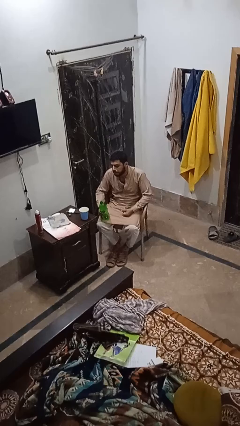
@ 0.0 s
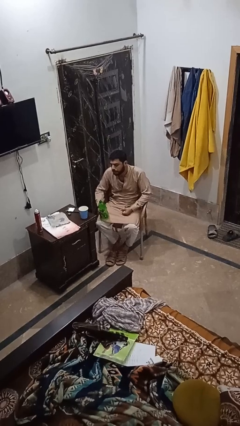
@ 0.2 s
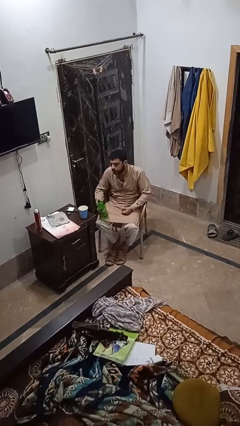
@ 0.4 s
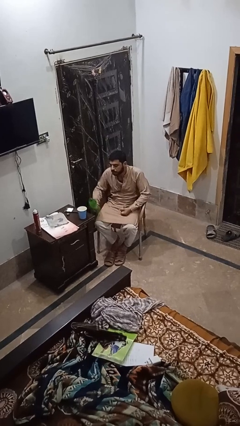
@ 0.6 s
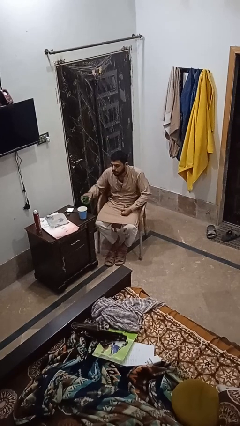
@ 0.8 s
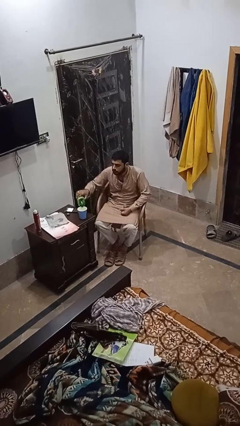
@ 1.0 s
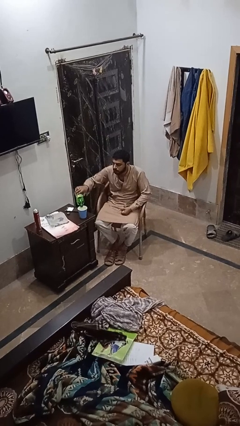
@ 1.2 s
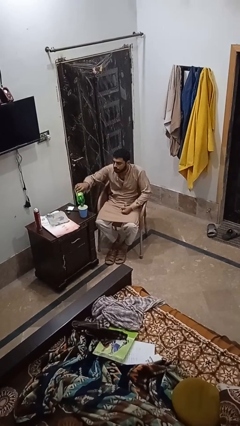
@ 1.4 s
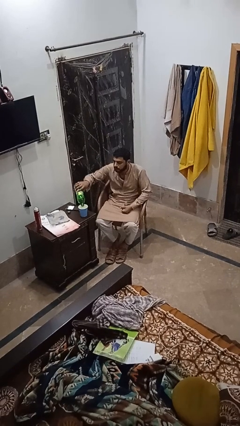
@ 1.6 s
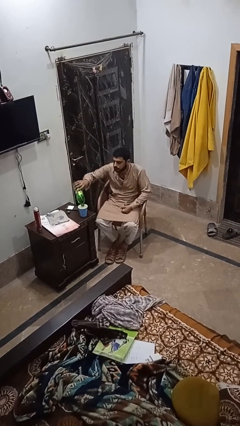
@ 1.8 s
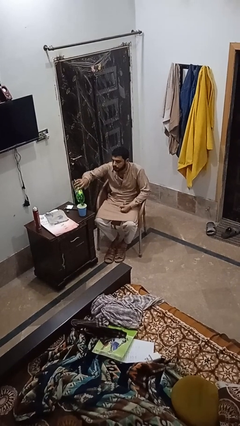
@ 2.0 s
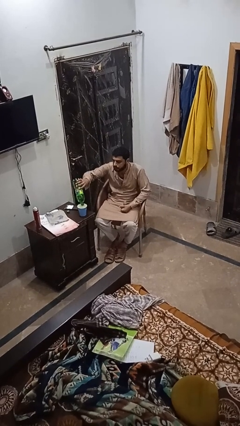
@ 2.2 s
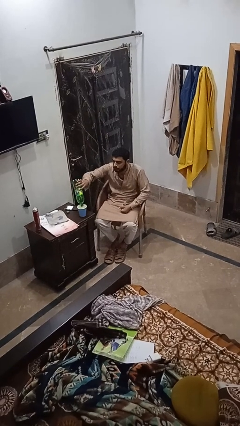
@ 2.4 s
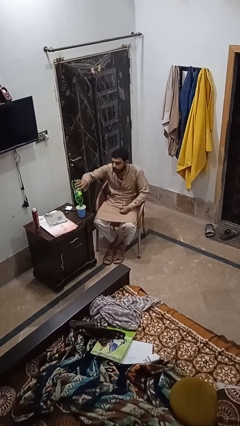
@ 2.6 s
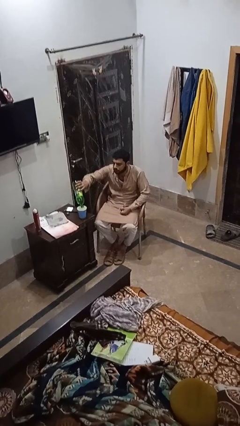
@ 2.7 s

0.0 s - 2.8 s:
person pours liquid into cup

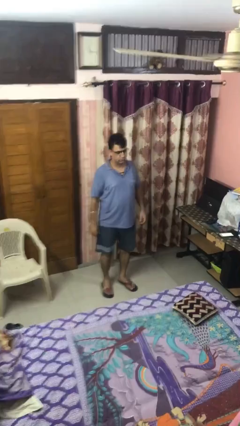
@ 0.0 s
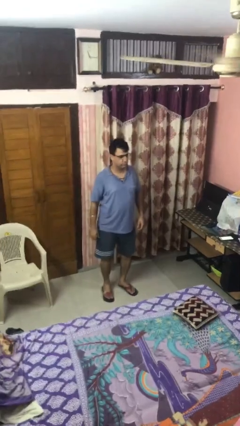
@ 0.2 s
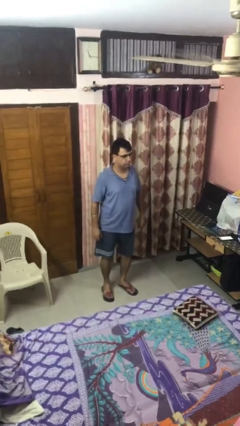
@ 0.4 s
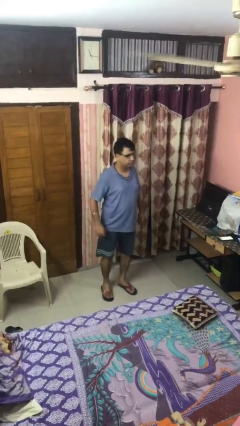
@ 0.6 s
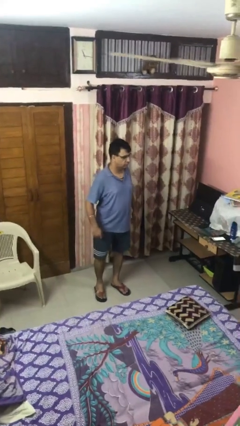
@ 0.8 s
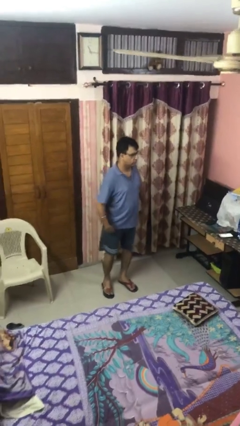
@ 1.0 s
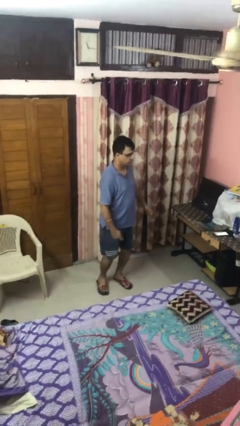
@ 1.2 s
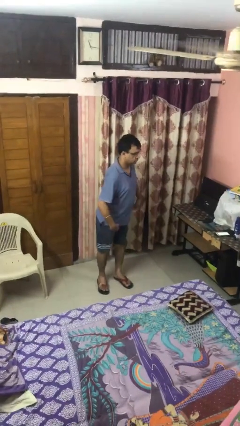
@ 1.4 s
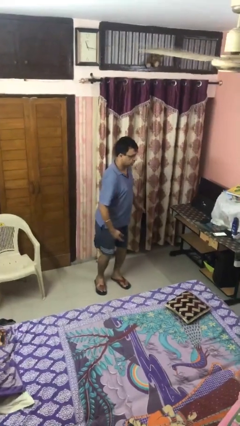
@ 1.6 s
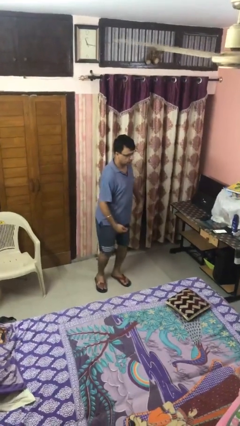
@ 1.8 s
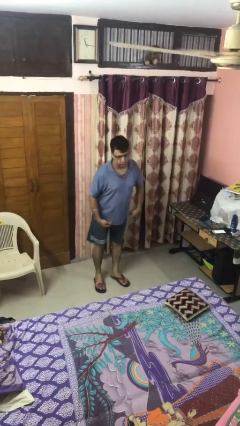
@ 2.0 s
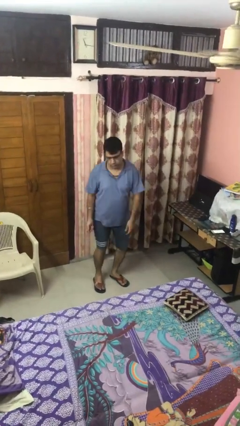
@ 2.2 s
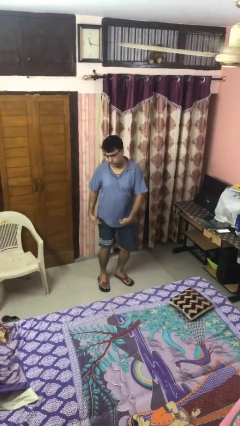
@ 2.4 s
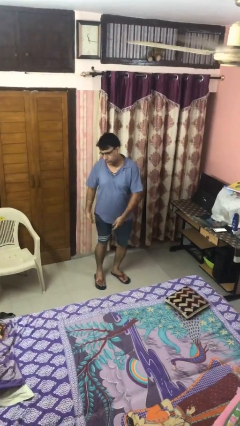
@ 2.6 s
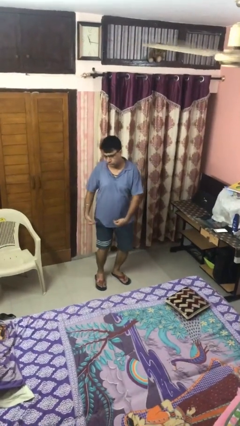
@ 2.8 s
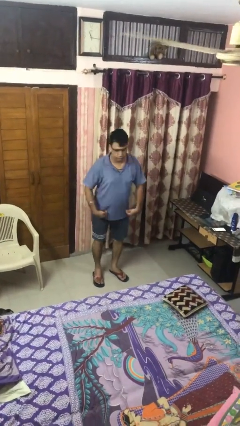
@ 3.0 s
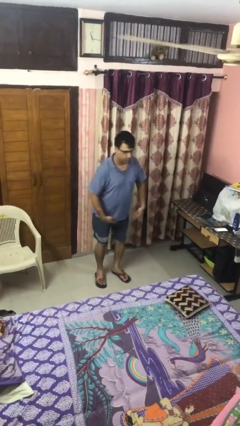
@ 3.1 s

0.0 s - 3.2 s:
person dances in place

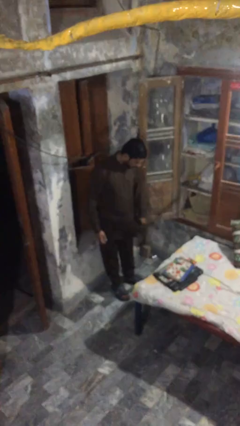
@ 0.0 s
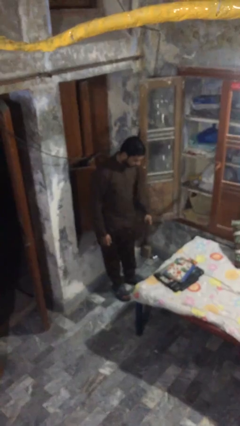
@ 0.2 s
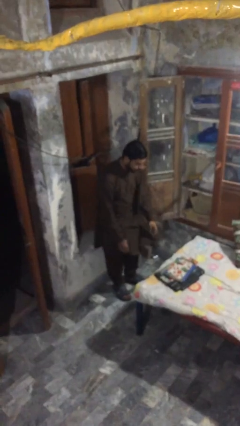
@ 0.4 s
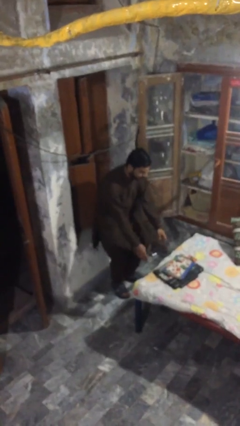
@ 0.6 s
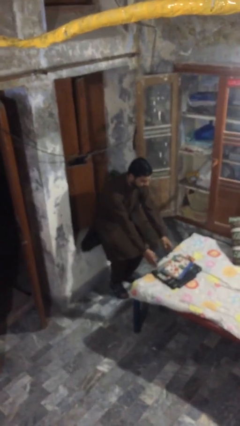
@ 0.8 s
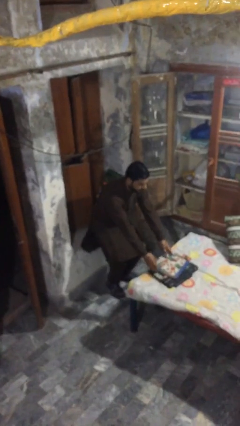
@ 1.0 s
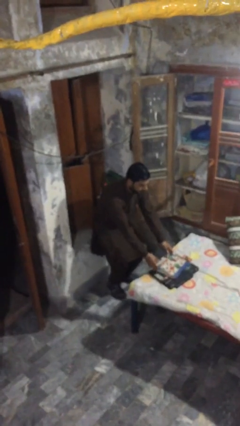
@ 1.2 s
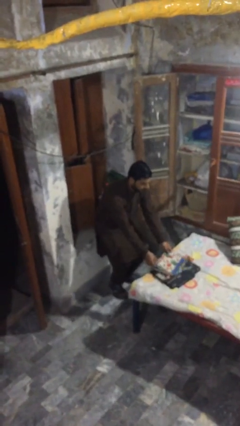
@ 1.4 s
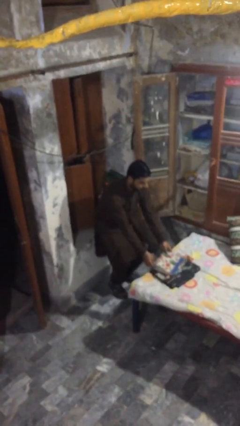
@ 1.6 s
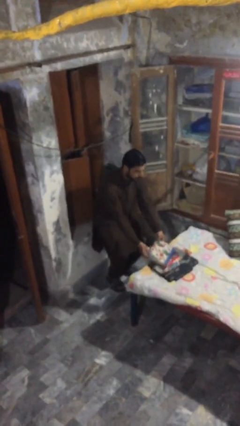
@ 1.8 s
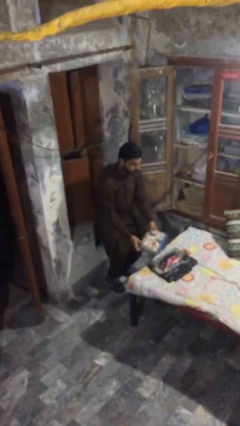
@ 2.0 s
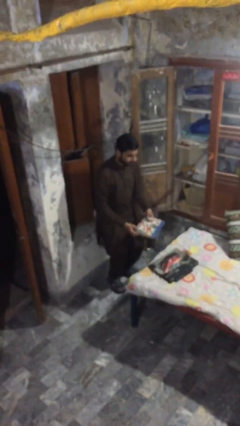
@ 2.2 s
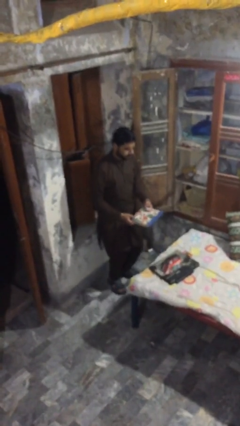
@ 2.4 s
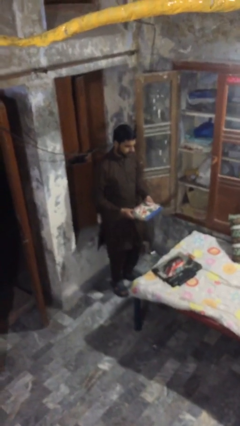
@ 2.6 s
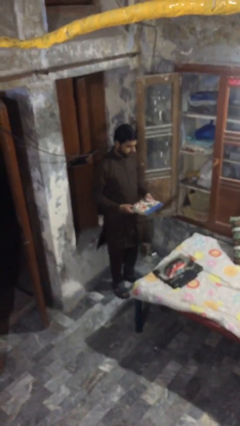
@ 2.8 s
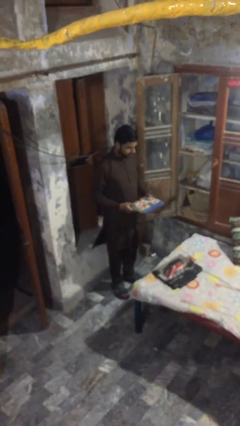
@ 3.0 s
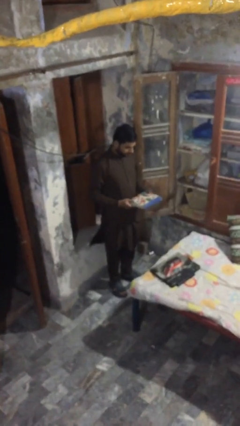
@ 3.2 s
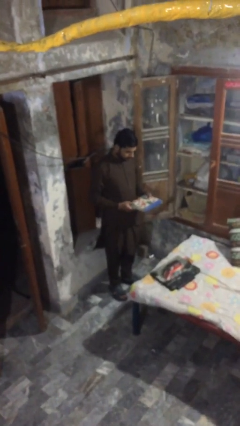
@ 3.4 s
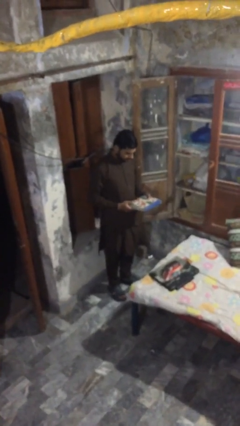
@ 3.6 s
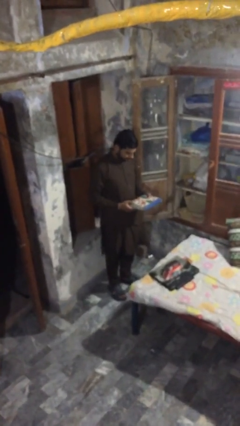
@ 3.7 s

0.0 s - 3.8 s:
person picks up object from table

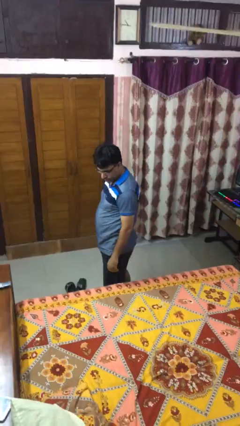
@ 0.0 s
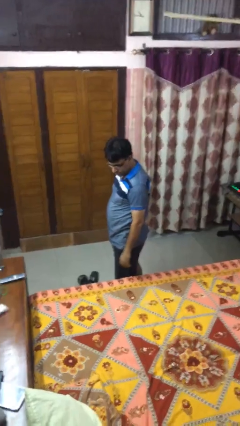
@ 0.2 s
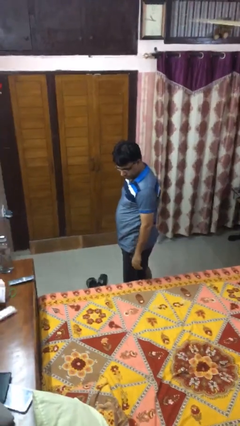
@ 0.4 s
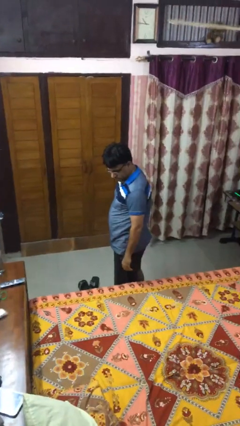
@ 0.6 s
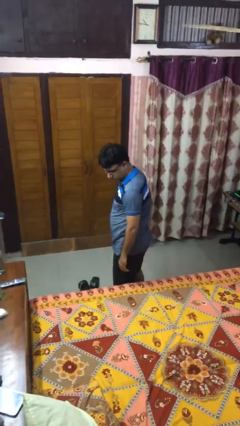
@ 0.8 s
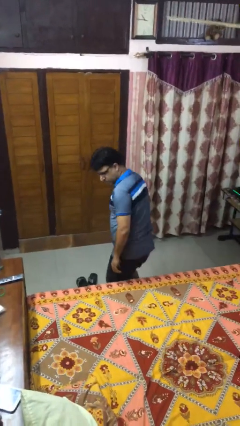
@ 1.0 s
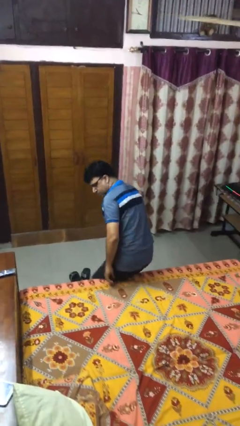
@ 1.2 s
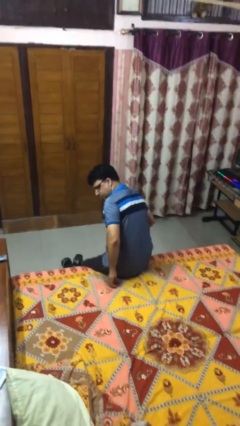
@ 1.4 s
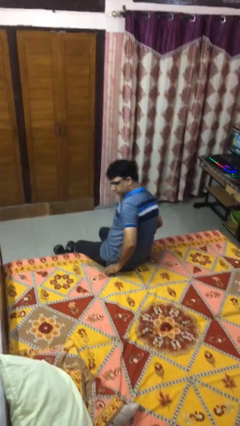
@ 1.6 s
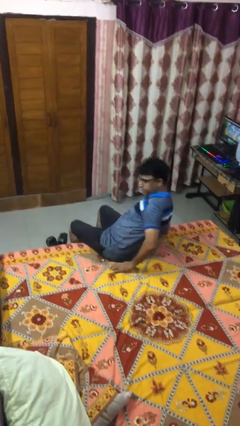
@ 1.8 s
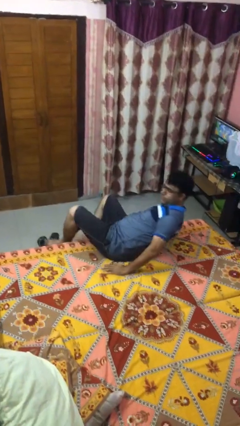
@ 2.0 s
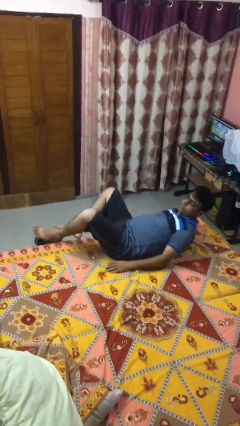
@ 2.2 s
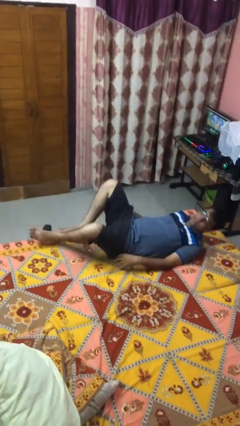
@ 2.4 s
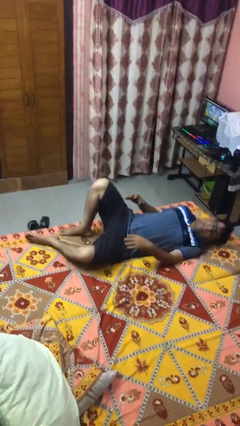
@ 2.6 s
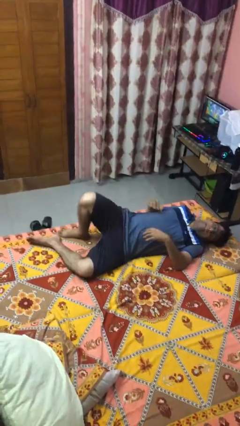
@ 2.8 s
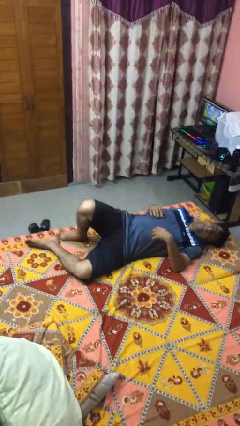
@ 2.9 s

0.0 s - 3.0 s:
person lies down on bed

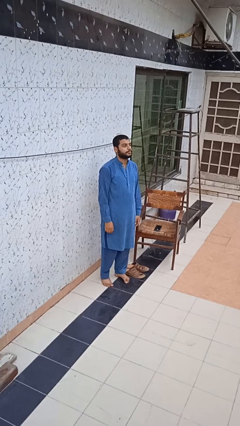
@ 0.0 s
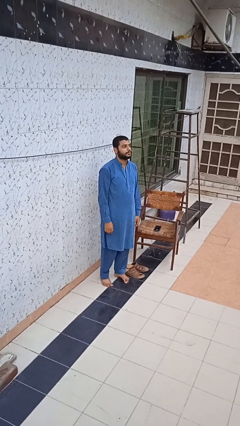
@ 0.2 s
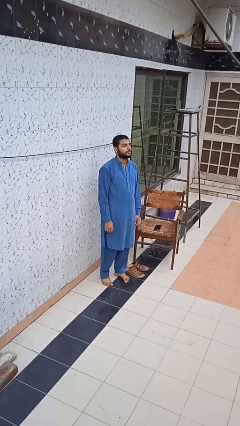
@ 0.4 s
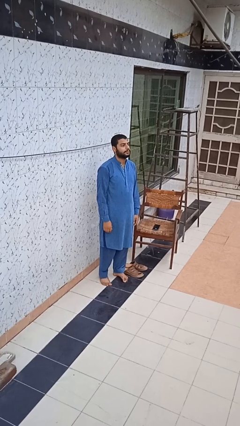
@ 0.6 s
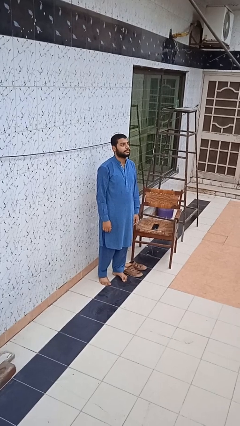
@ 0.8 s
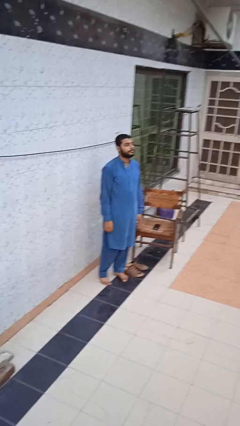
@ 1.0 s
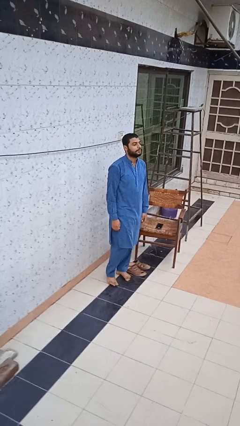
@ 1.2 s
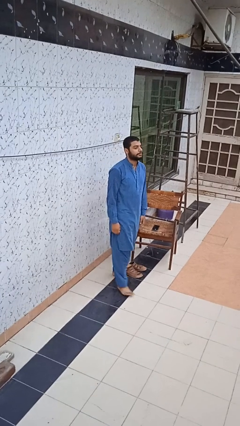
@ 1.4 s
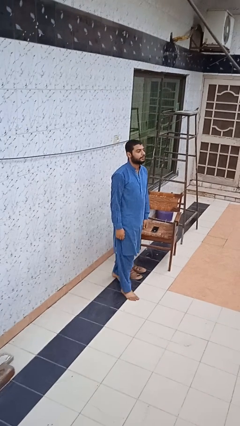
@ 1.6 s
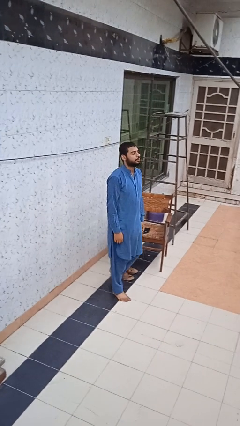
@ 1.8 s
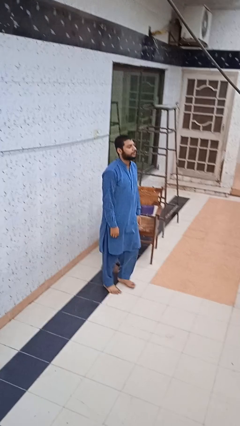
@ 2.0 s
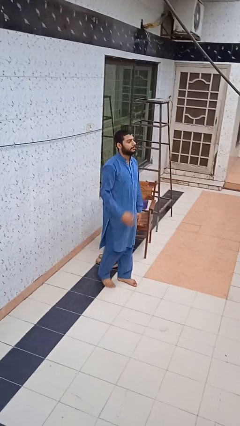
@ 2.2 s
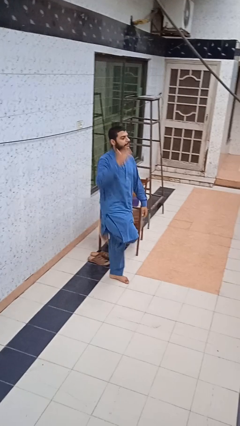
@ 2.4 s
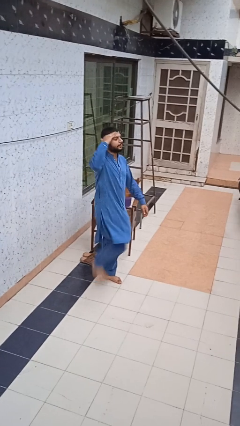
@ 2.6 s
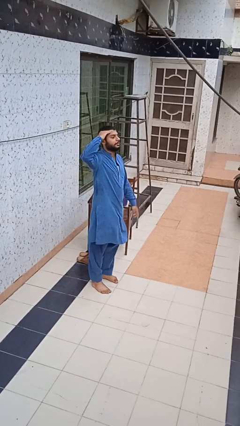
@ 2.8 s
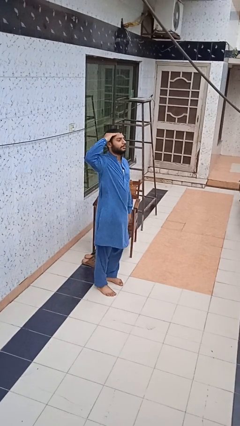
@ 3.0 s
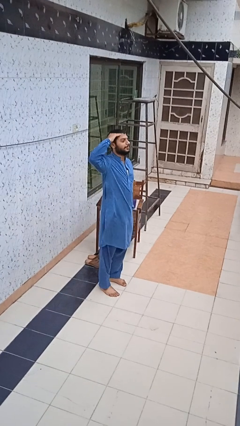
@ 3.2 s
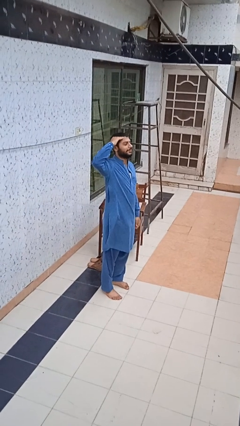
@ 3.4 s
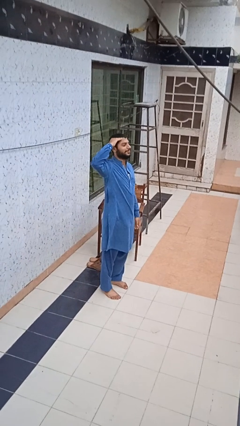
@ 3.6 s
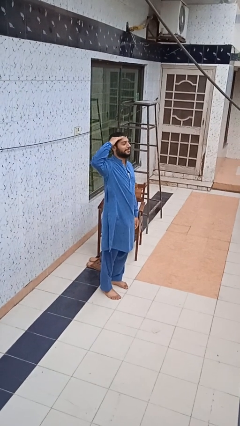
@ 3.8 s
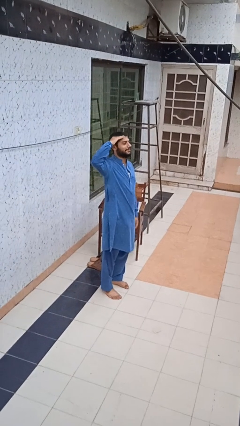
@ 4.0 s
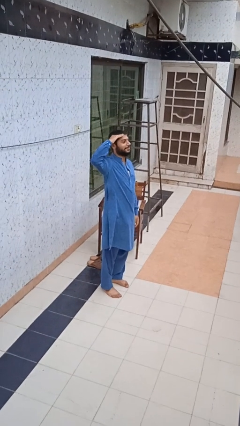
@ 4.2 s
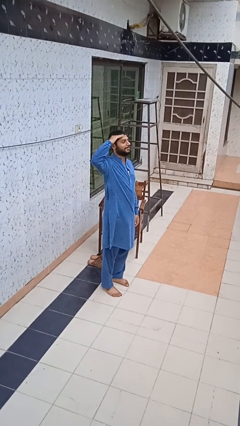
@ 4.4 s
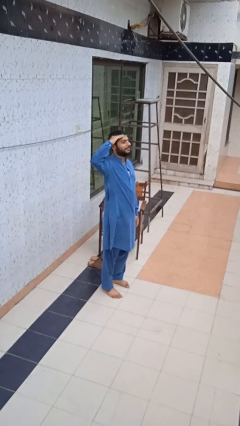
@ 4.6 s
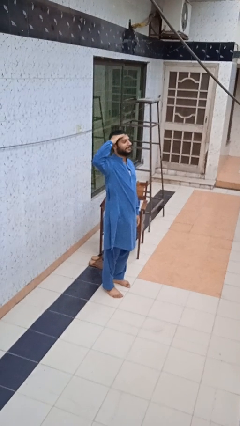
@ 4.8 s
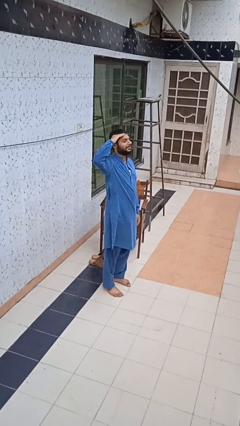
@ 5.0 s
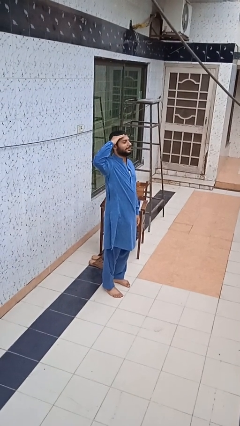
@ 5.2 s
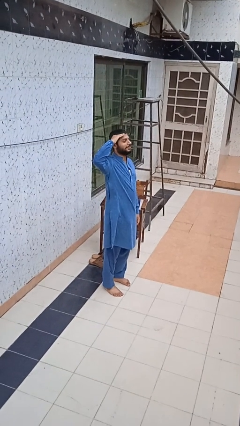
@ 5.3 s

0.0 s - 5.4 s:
person salutes
